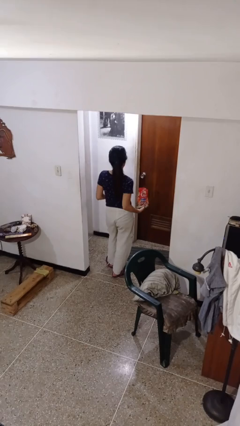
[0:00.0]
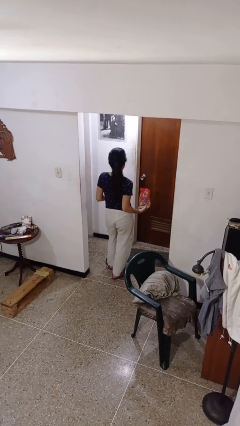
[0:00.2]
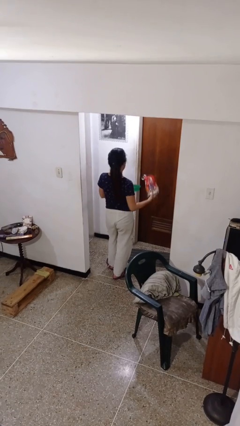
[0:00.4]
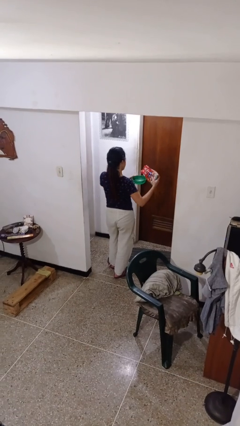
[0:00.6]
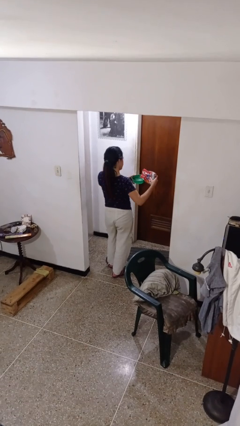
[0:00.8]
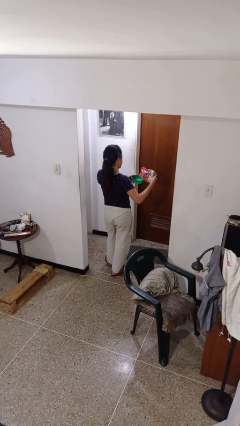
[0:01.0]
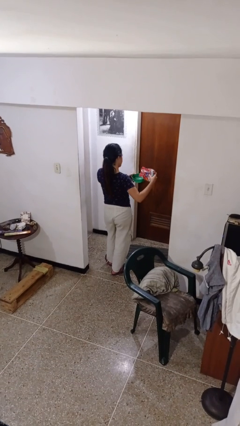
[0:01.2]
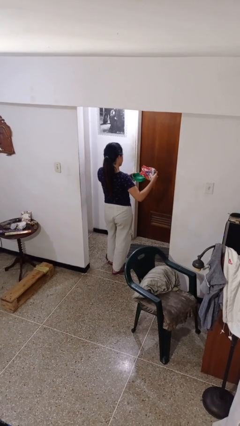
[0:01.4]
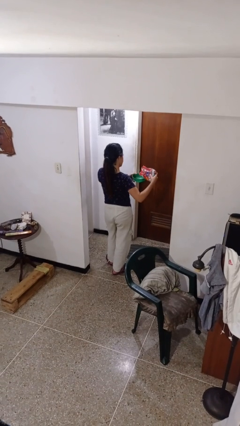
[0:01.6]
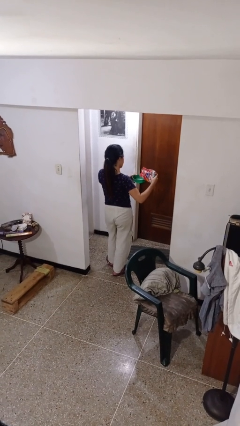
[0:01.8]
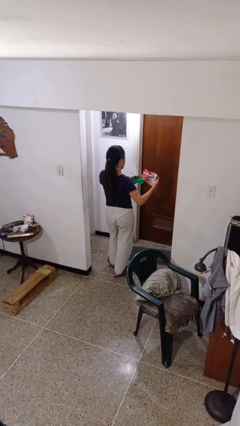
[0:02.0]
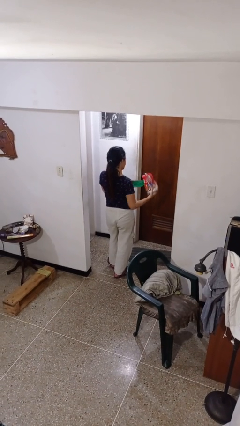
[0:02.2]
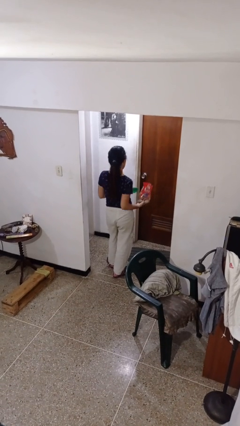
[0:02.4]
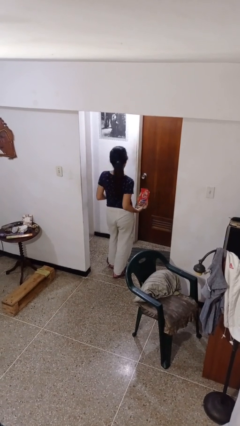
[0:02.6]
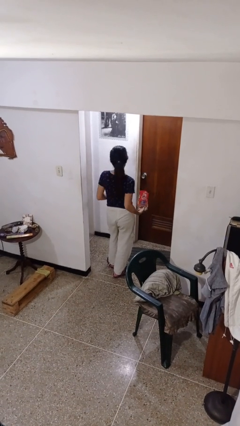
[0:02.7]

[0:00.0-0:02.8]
person pours into bowl

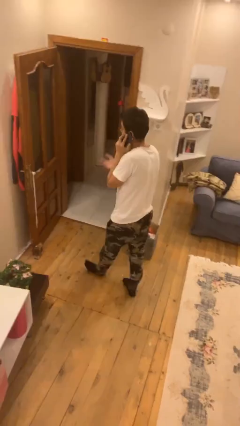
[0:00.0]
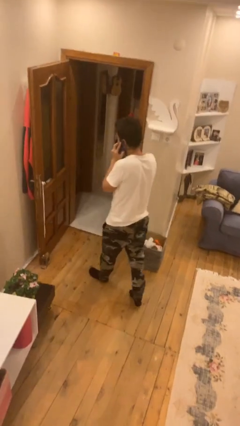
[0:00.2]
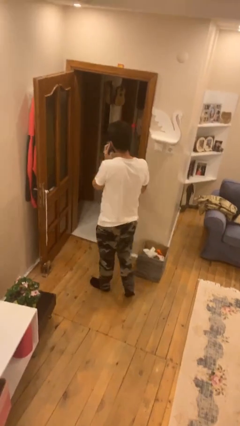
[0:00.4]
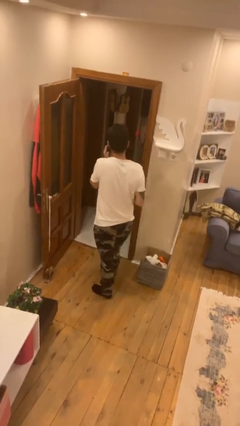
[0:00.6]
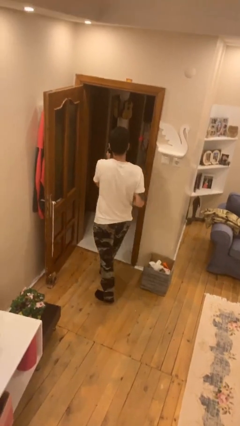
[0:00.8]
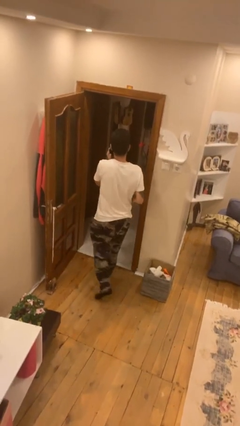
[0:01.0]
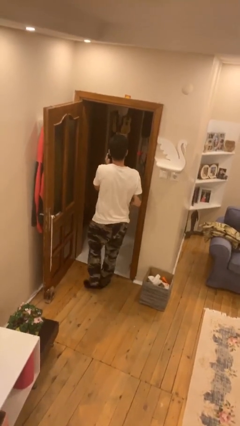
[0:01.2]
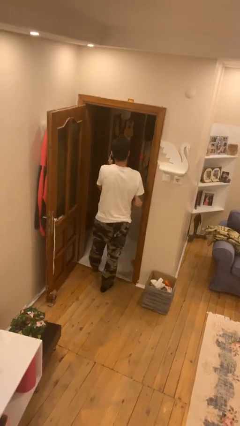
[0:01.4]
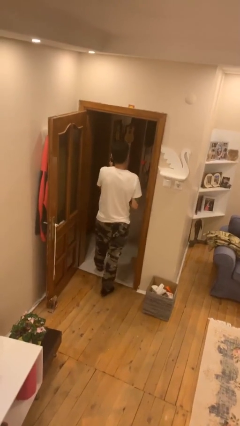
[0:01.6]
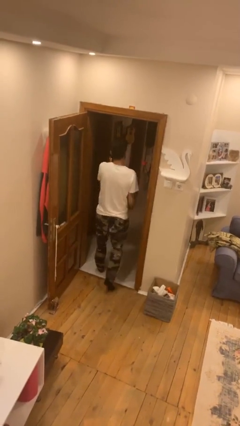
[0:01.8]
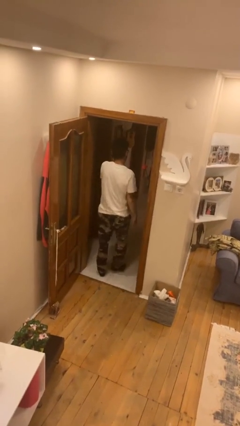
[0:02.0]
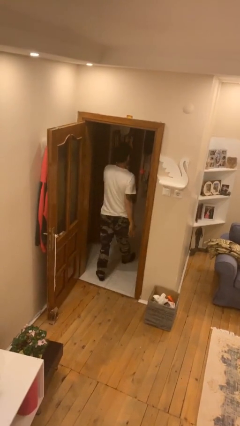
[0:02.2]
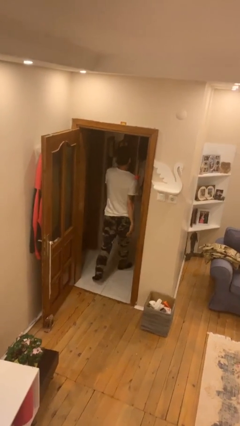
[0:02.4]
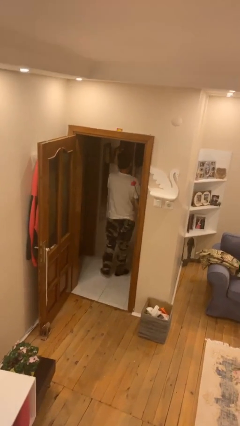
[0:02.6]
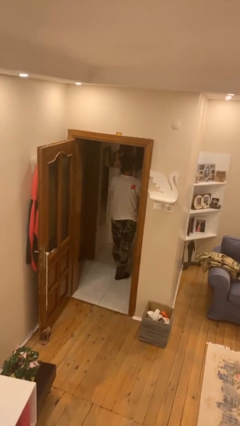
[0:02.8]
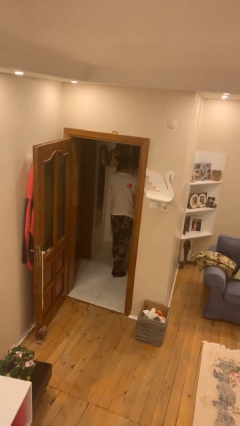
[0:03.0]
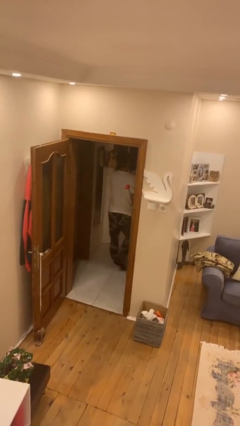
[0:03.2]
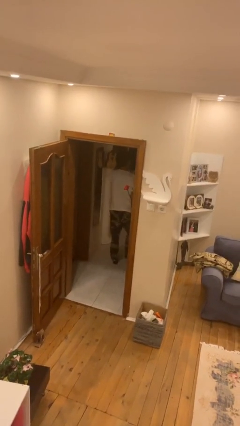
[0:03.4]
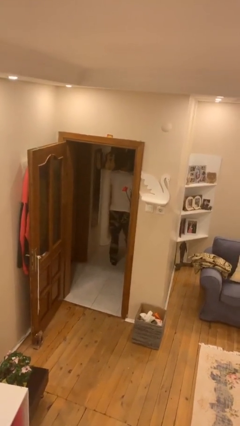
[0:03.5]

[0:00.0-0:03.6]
person exits scene through structure

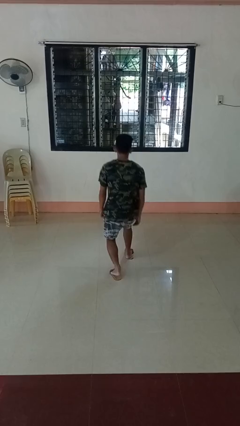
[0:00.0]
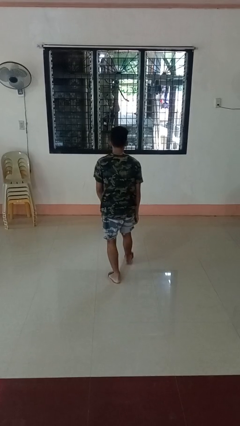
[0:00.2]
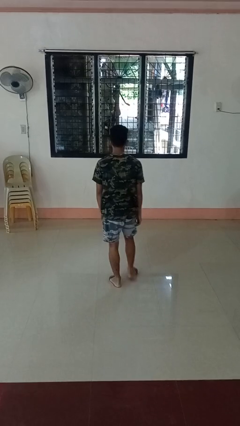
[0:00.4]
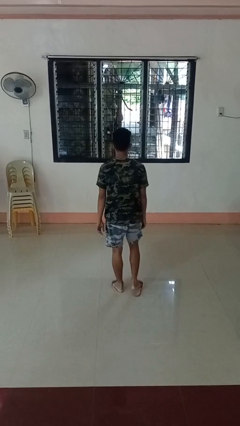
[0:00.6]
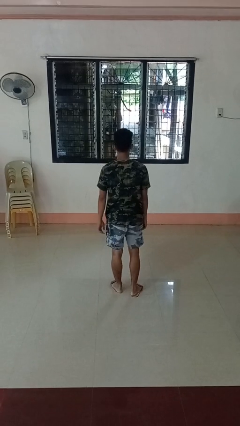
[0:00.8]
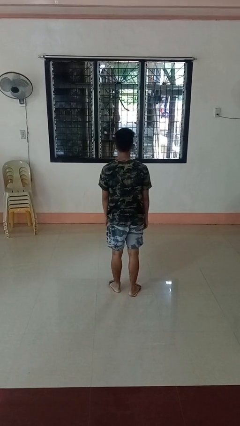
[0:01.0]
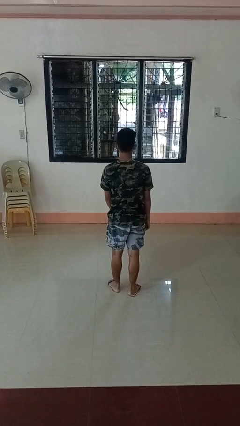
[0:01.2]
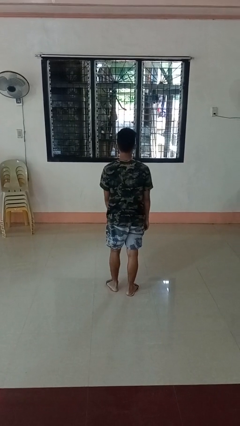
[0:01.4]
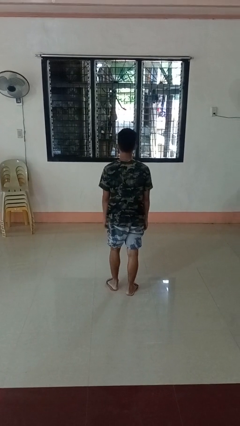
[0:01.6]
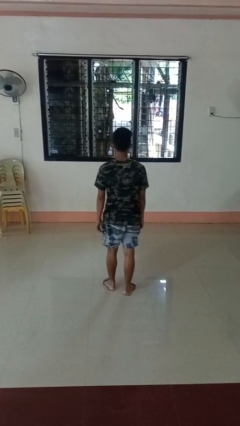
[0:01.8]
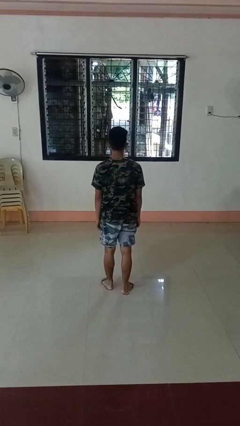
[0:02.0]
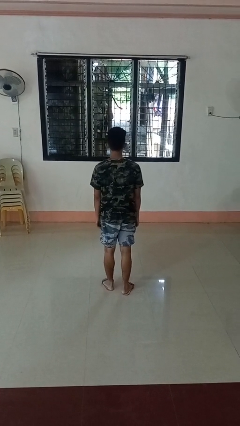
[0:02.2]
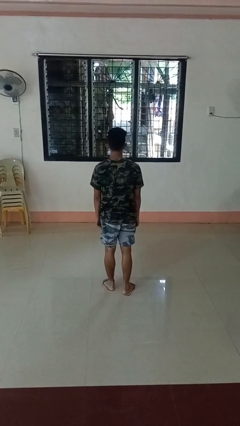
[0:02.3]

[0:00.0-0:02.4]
person stands up from floor

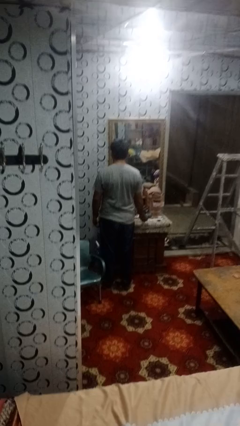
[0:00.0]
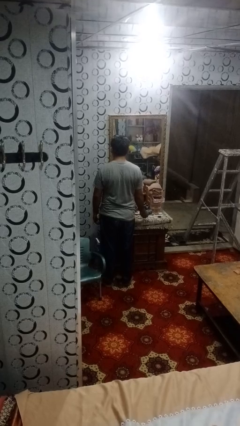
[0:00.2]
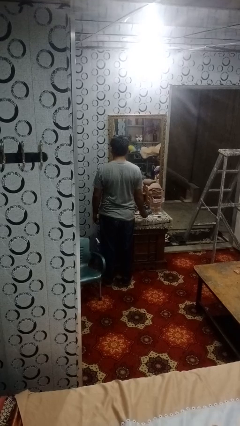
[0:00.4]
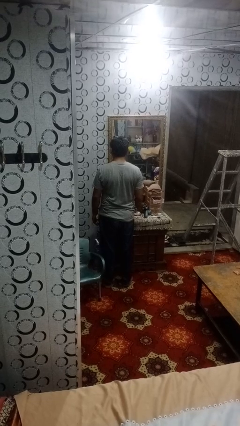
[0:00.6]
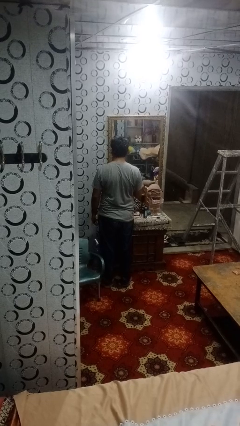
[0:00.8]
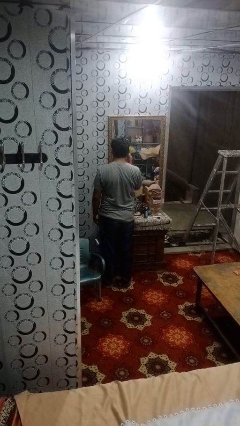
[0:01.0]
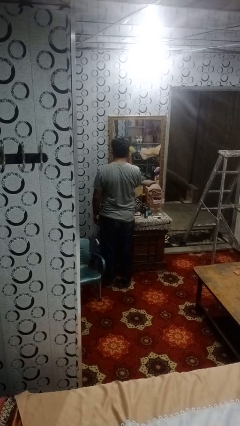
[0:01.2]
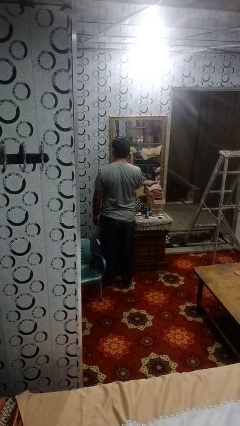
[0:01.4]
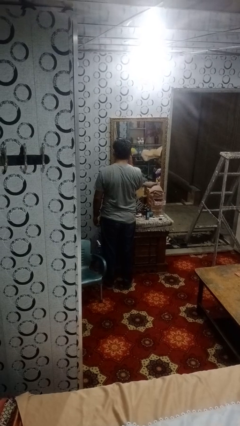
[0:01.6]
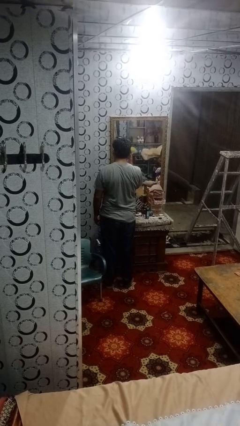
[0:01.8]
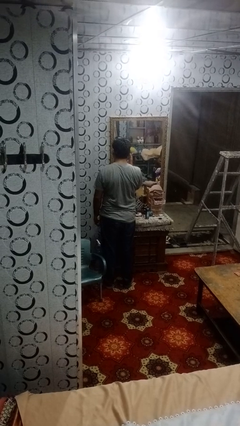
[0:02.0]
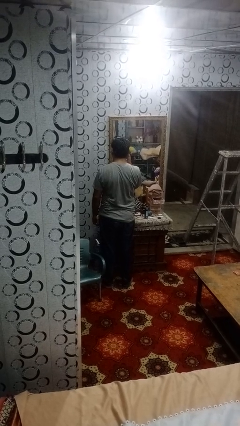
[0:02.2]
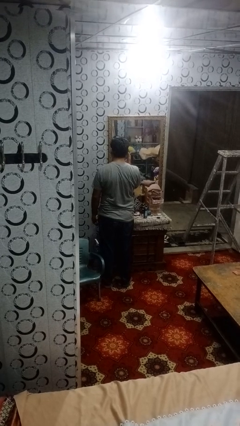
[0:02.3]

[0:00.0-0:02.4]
person applies eye makeup

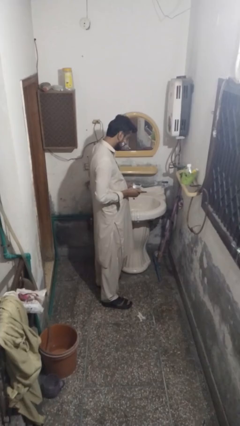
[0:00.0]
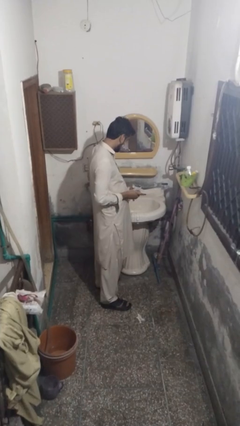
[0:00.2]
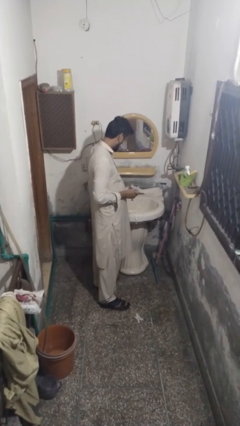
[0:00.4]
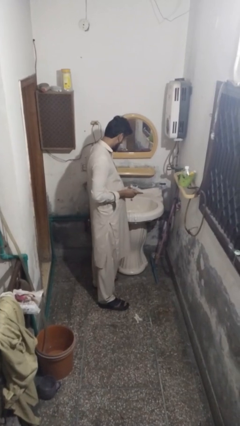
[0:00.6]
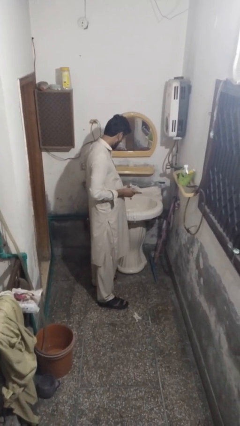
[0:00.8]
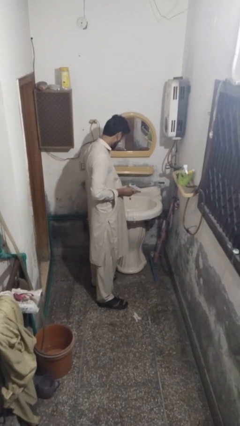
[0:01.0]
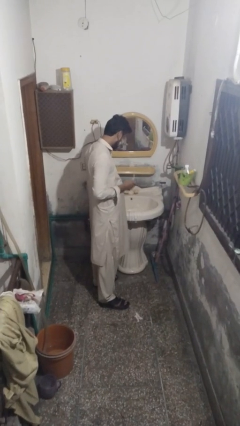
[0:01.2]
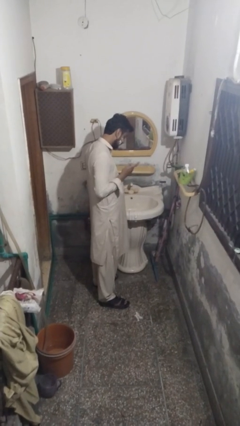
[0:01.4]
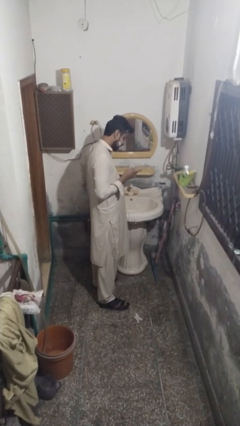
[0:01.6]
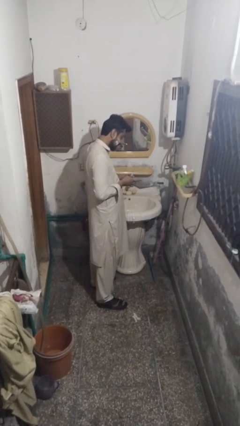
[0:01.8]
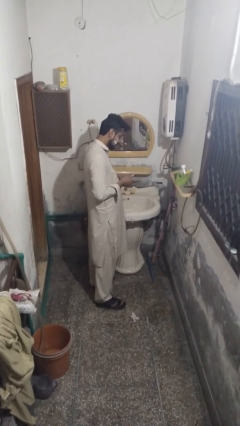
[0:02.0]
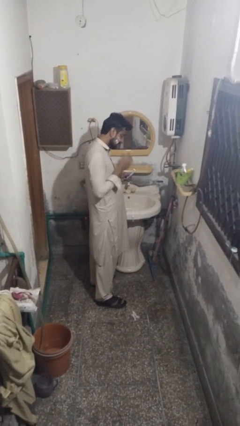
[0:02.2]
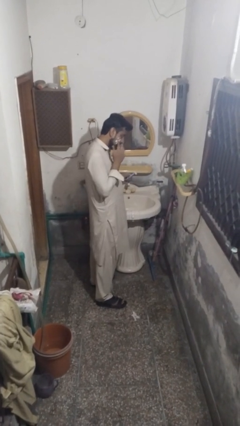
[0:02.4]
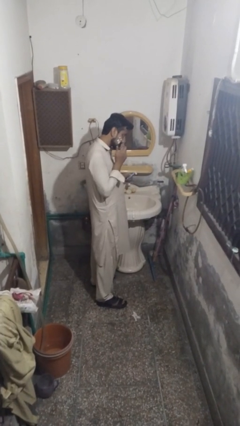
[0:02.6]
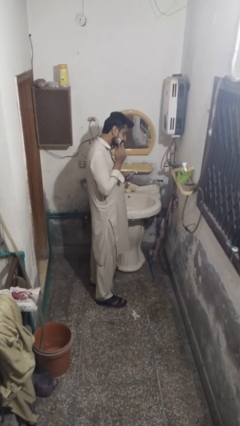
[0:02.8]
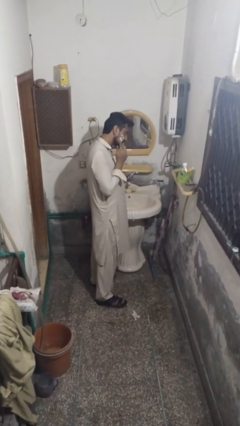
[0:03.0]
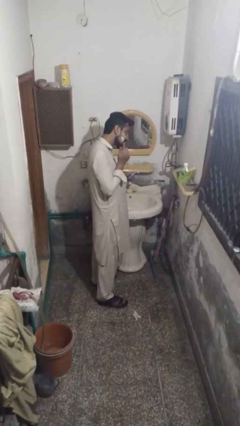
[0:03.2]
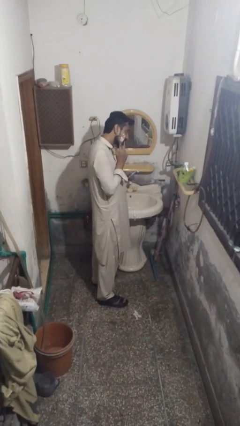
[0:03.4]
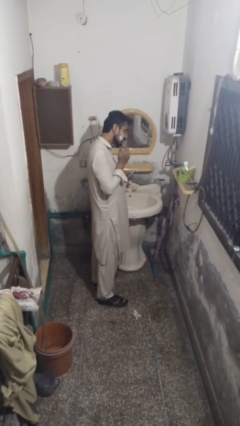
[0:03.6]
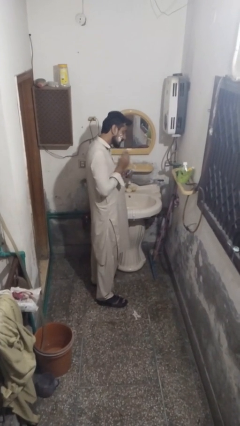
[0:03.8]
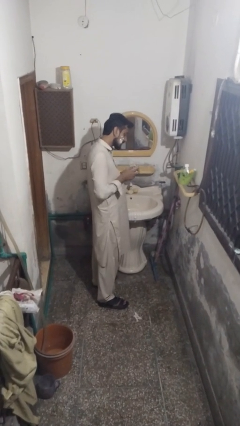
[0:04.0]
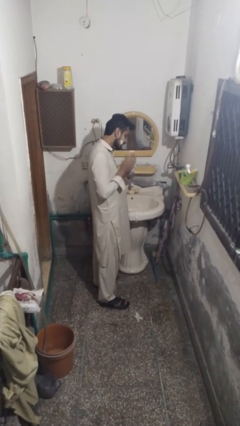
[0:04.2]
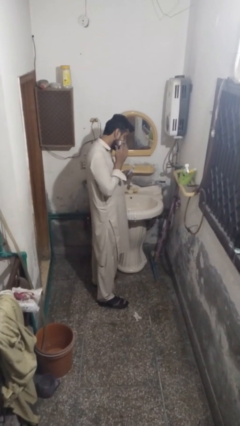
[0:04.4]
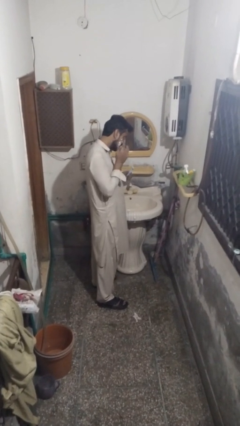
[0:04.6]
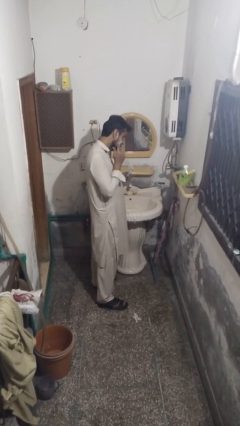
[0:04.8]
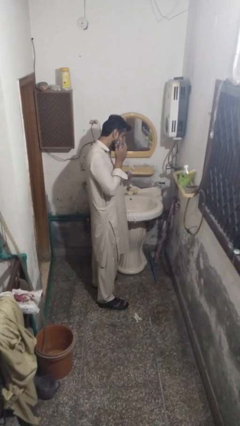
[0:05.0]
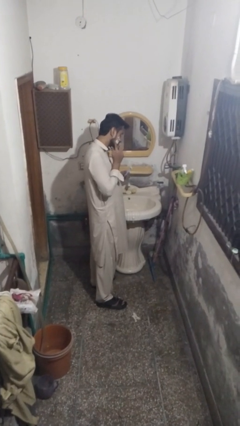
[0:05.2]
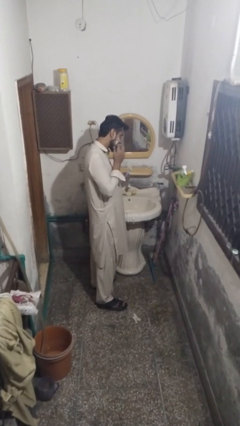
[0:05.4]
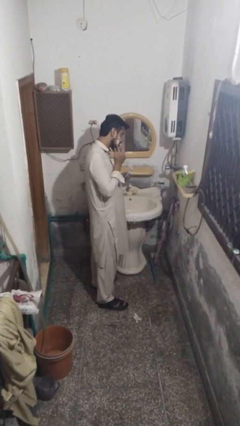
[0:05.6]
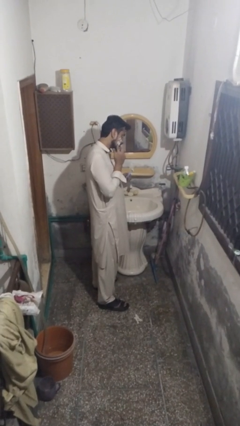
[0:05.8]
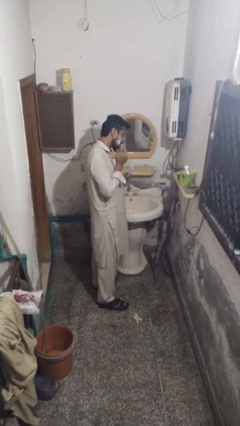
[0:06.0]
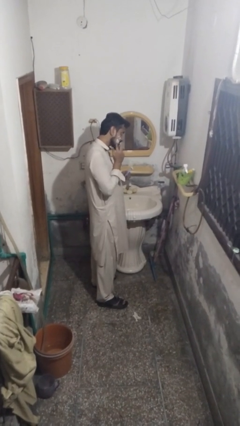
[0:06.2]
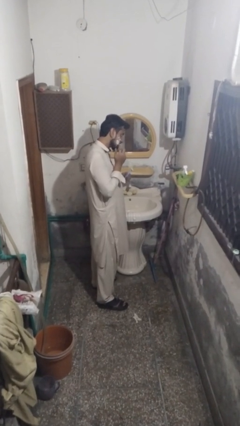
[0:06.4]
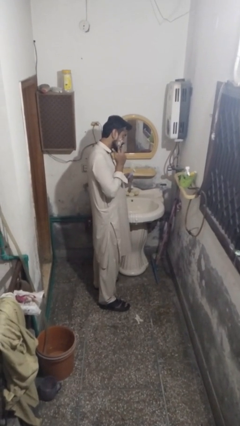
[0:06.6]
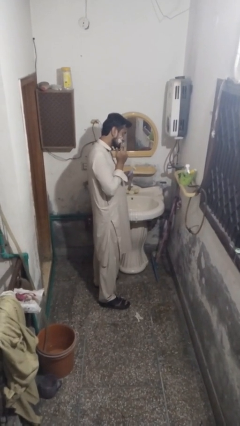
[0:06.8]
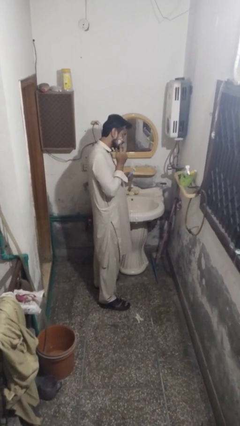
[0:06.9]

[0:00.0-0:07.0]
person applies shaving cream
